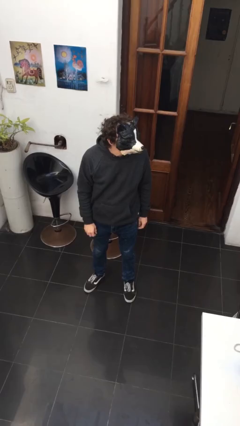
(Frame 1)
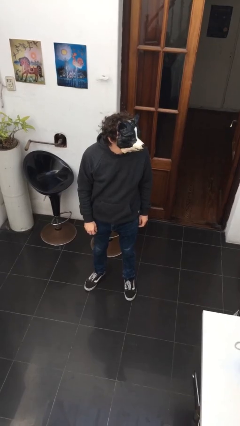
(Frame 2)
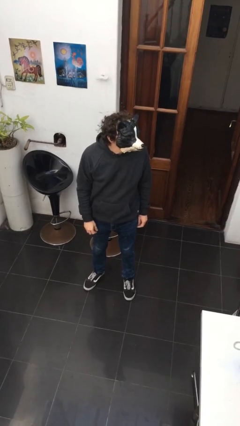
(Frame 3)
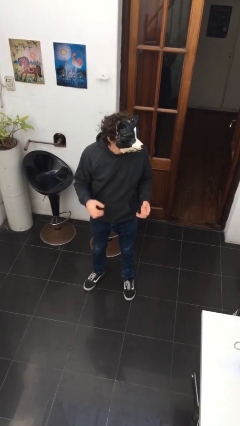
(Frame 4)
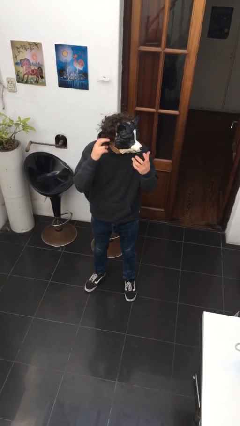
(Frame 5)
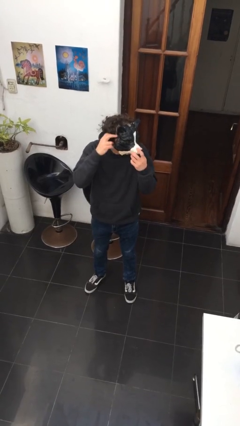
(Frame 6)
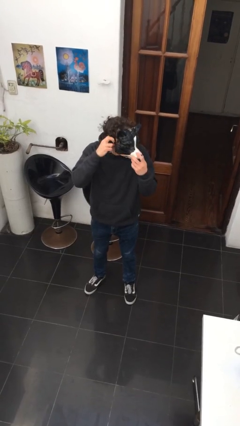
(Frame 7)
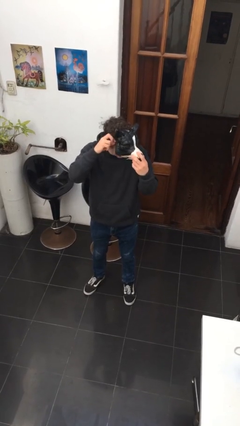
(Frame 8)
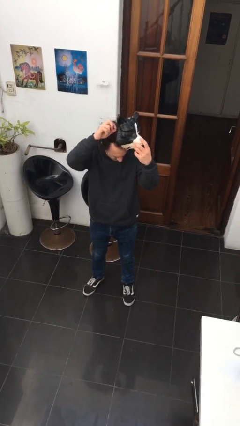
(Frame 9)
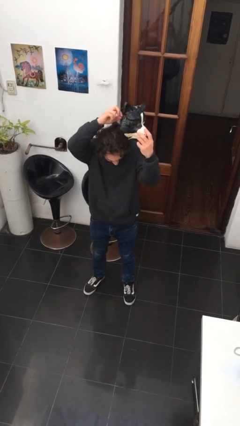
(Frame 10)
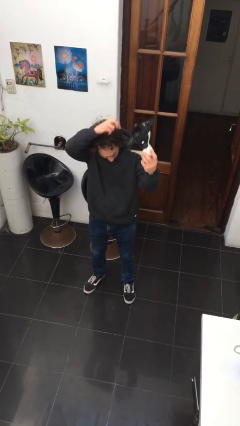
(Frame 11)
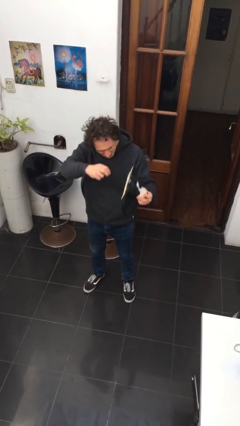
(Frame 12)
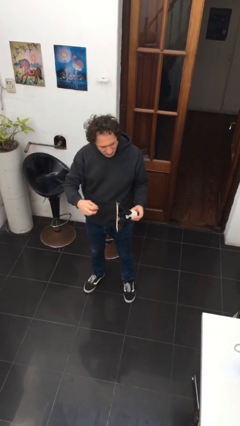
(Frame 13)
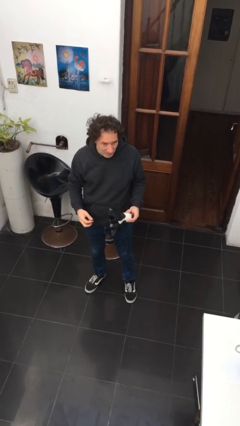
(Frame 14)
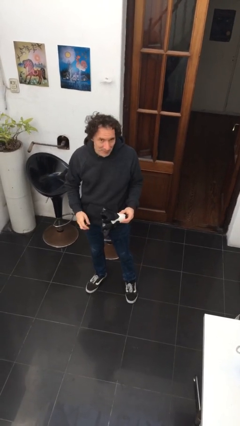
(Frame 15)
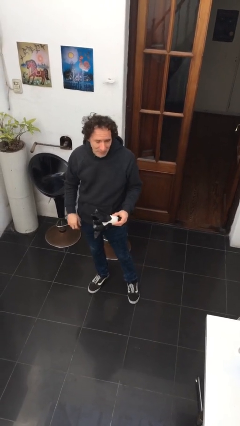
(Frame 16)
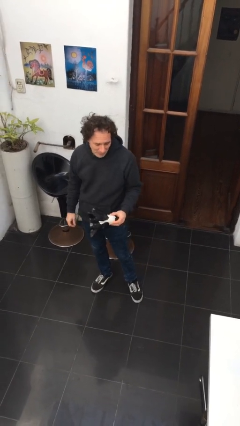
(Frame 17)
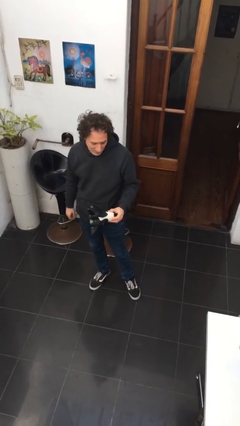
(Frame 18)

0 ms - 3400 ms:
person takes off facemask

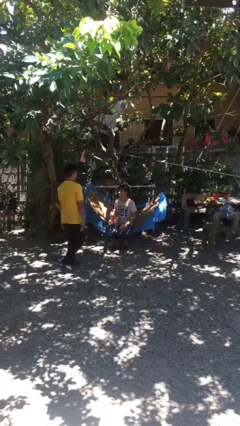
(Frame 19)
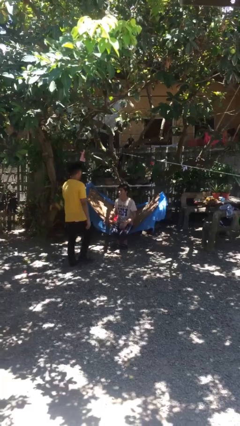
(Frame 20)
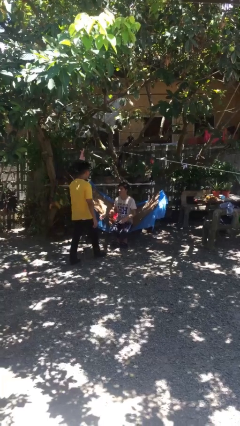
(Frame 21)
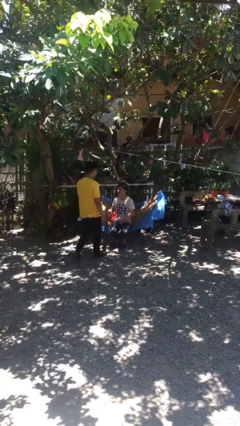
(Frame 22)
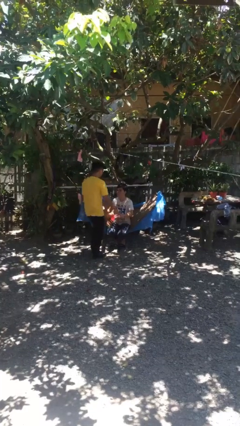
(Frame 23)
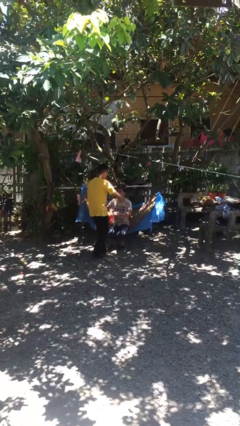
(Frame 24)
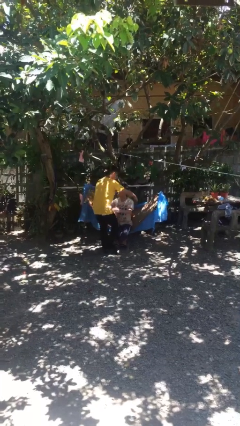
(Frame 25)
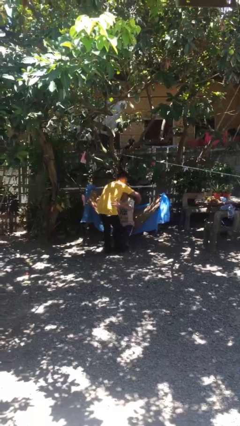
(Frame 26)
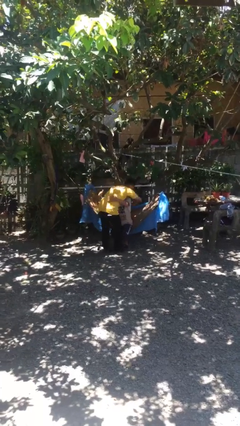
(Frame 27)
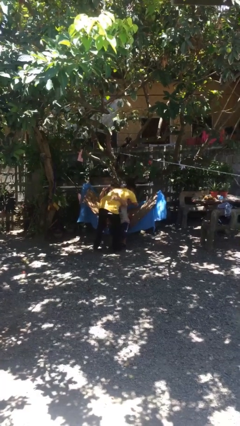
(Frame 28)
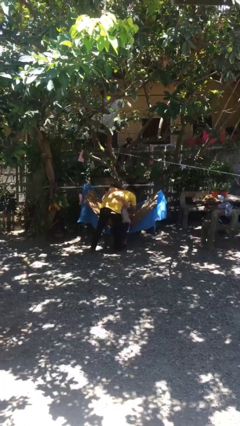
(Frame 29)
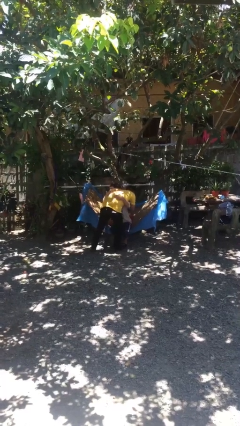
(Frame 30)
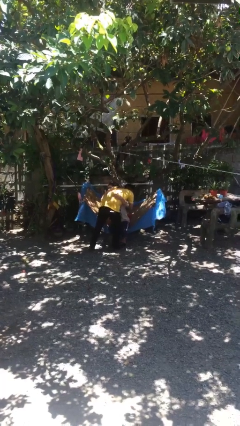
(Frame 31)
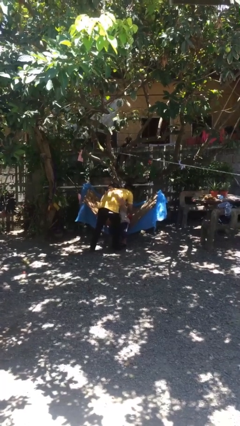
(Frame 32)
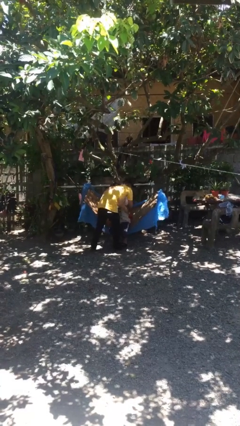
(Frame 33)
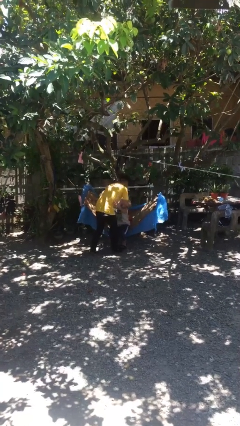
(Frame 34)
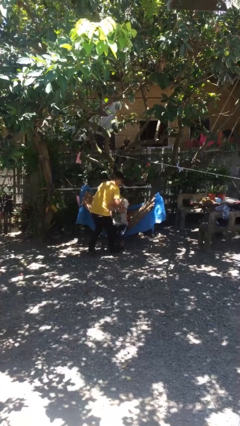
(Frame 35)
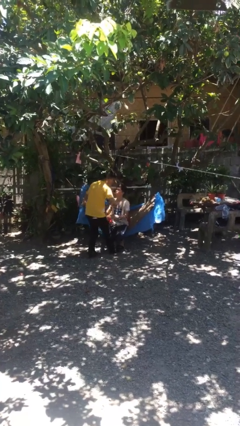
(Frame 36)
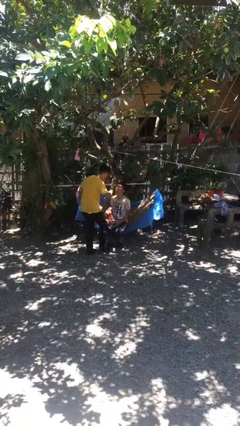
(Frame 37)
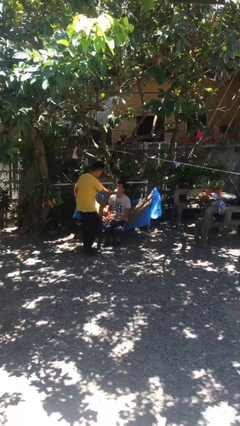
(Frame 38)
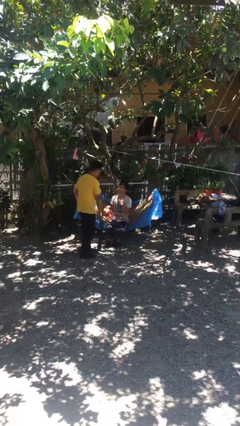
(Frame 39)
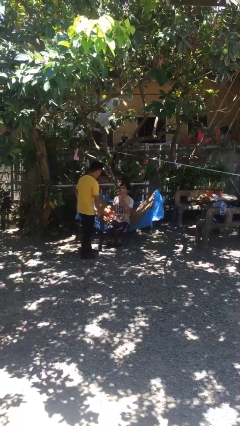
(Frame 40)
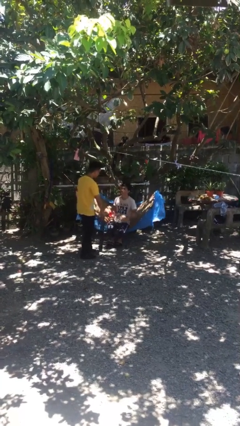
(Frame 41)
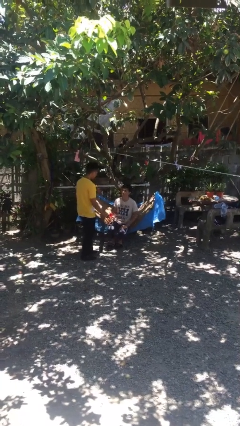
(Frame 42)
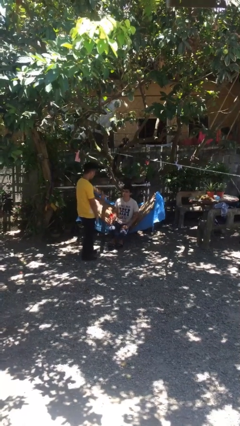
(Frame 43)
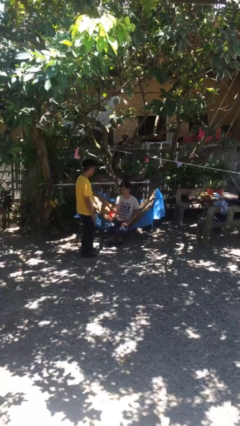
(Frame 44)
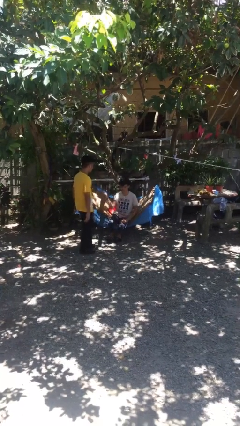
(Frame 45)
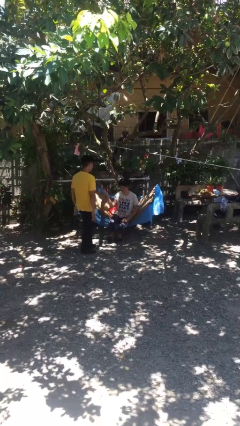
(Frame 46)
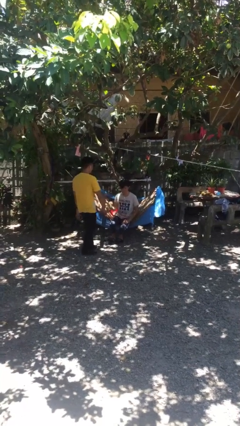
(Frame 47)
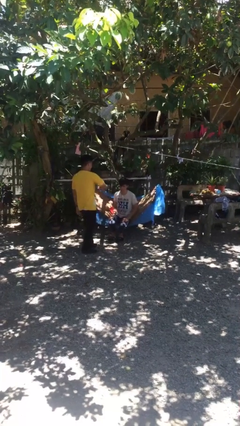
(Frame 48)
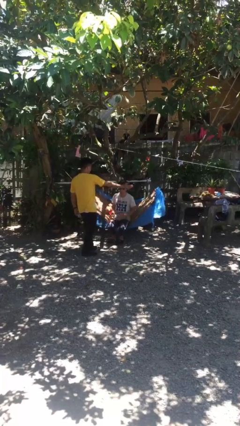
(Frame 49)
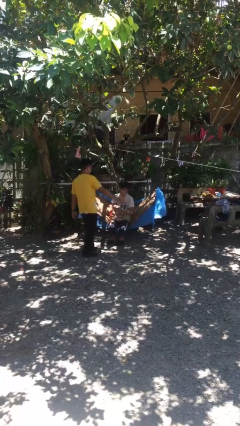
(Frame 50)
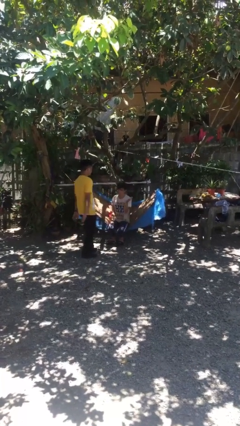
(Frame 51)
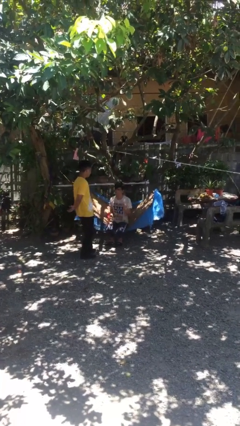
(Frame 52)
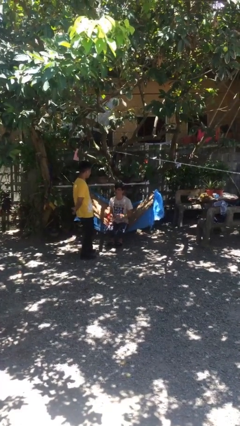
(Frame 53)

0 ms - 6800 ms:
person embraces person

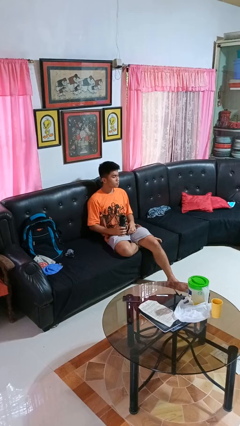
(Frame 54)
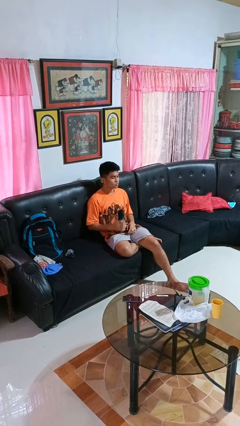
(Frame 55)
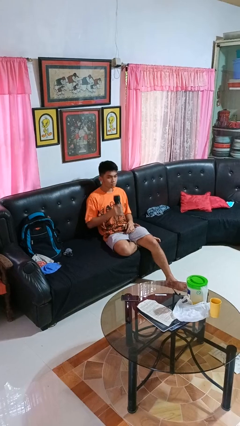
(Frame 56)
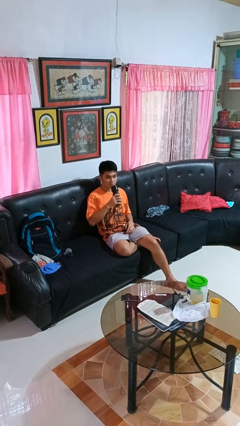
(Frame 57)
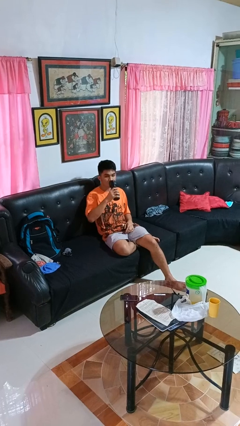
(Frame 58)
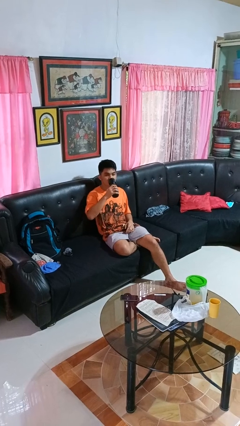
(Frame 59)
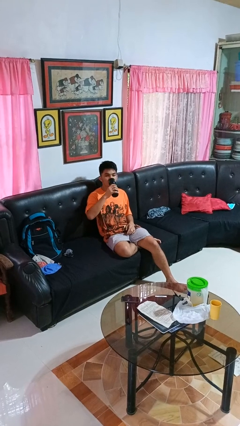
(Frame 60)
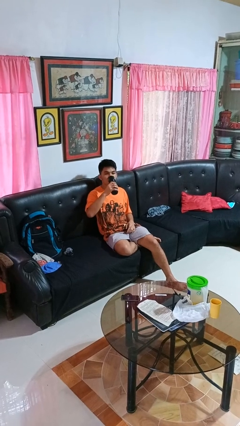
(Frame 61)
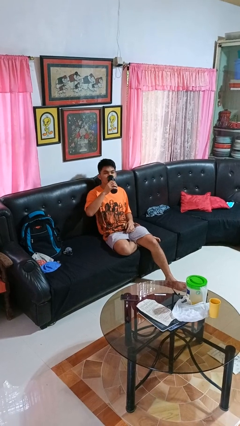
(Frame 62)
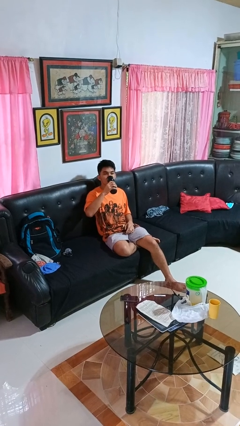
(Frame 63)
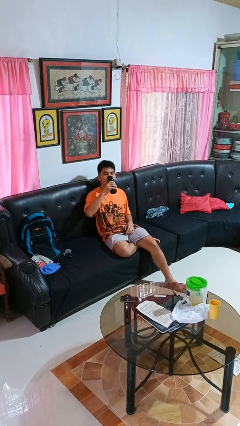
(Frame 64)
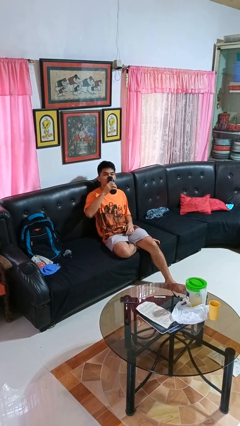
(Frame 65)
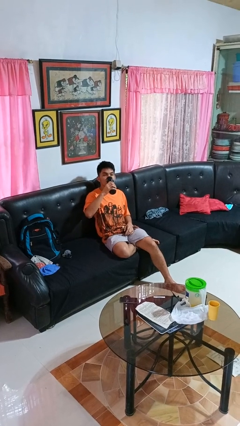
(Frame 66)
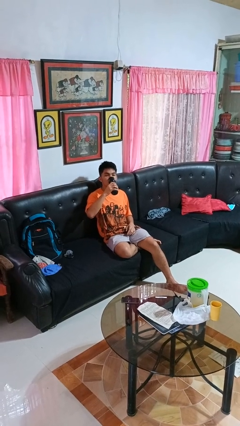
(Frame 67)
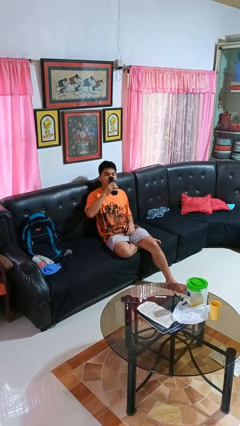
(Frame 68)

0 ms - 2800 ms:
person drinks from bottle

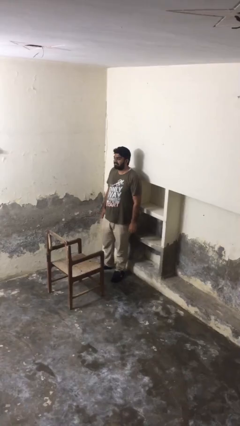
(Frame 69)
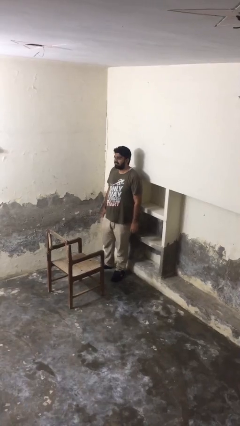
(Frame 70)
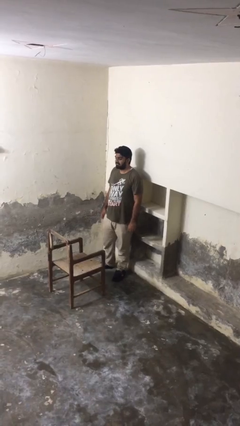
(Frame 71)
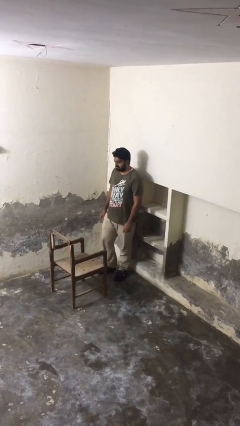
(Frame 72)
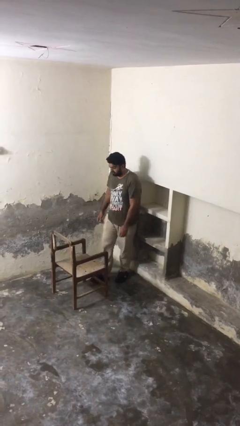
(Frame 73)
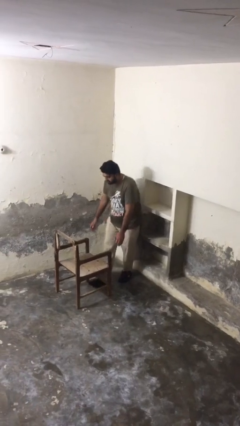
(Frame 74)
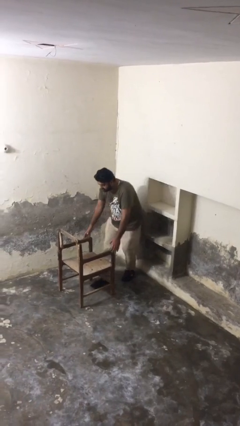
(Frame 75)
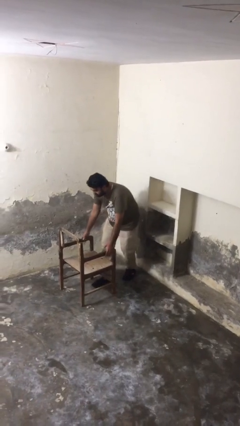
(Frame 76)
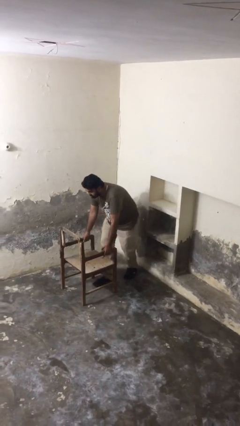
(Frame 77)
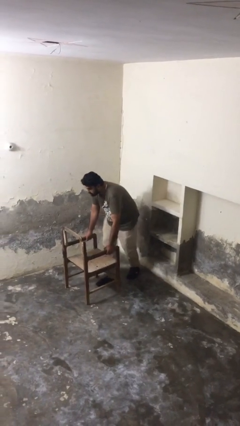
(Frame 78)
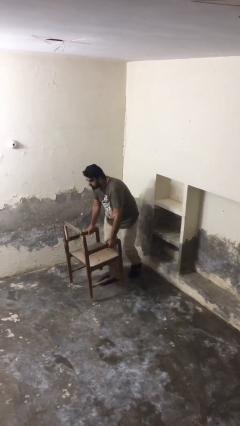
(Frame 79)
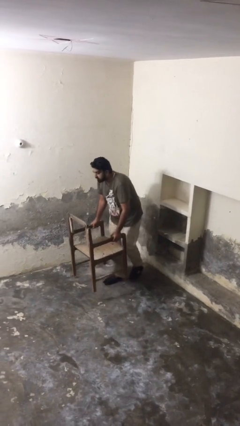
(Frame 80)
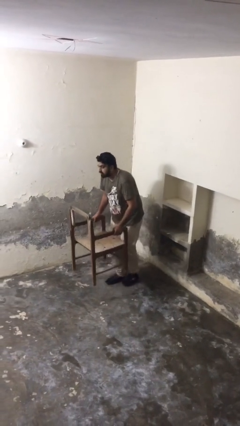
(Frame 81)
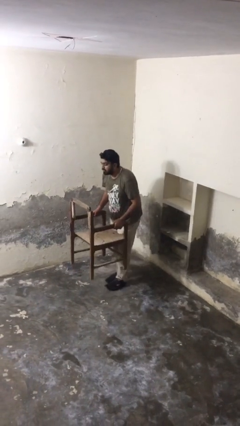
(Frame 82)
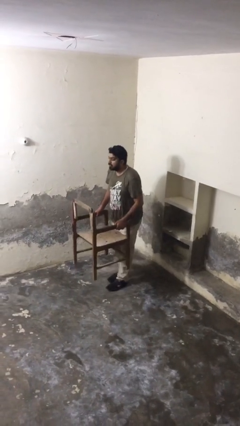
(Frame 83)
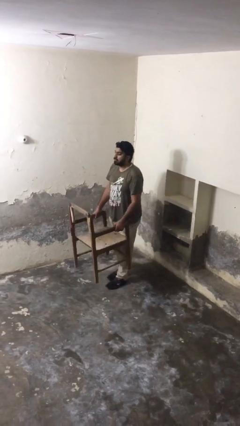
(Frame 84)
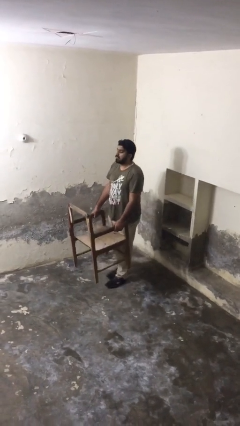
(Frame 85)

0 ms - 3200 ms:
person picks up object from floor

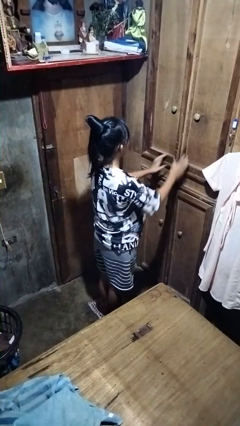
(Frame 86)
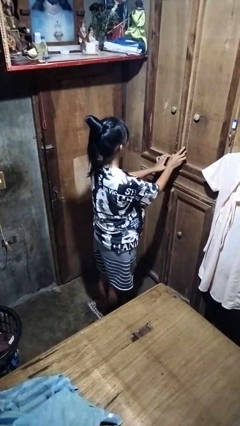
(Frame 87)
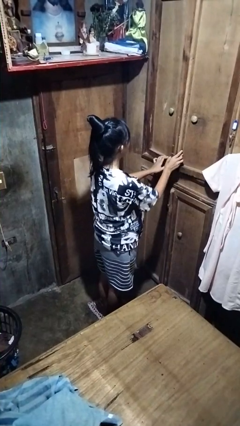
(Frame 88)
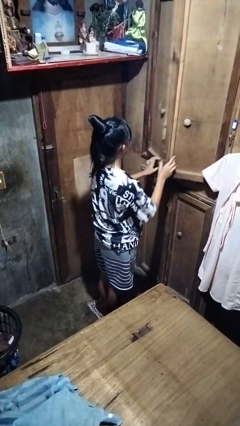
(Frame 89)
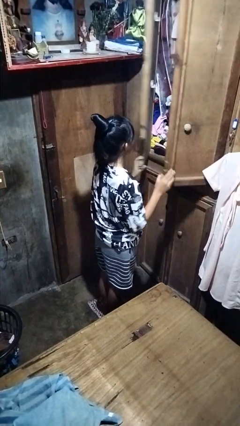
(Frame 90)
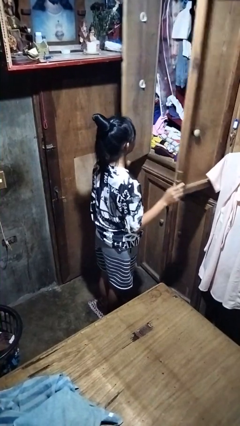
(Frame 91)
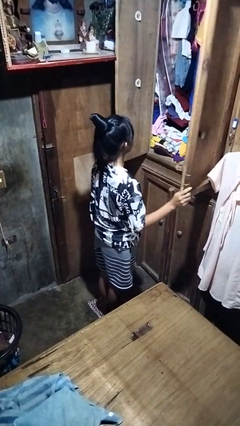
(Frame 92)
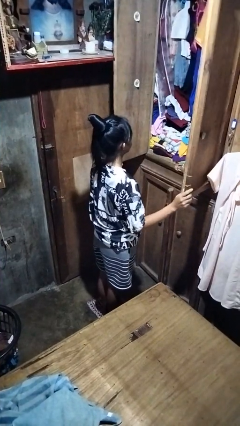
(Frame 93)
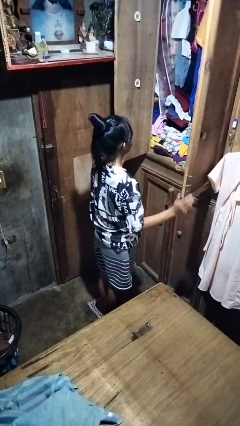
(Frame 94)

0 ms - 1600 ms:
person opens closet door
